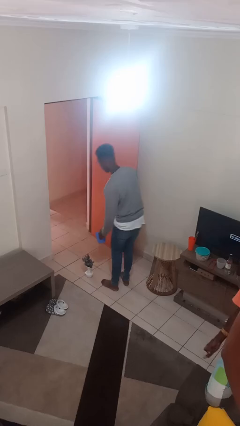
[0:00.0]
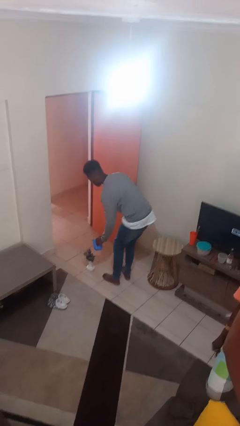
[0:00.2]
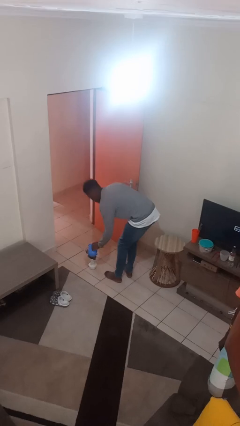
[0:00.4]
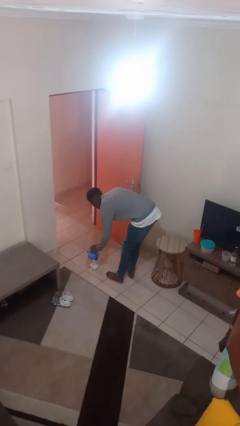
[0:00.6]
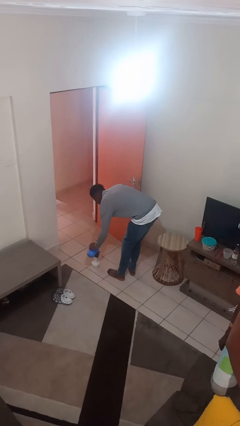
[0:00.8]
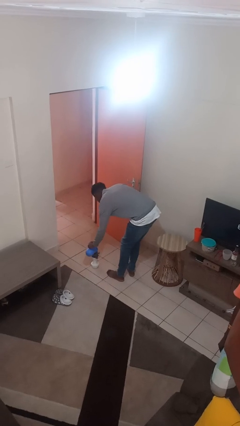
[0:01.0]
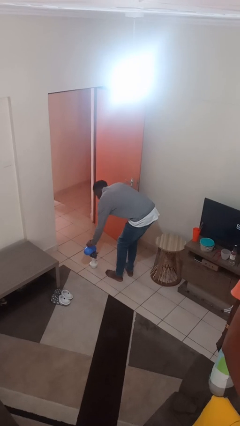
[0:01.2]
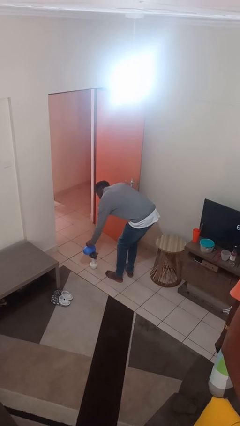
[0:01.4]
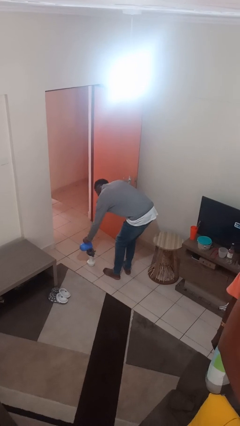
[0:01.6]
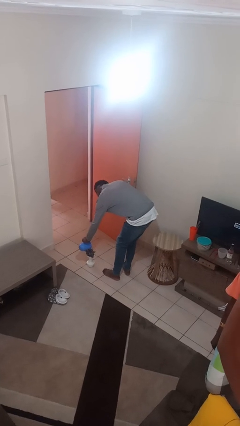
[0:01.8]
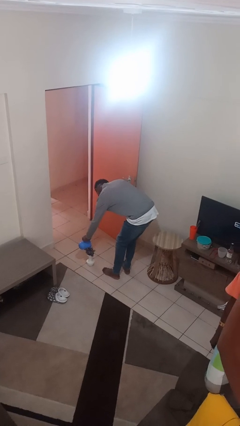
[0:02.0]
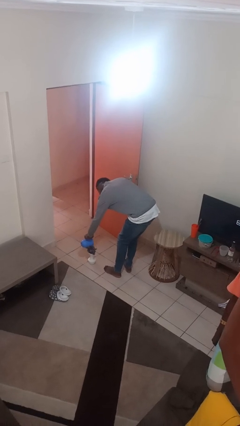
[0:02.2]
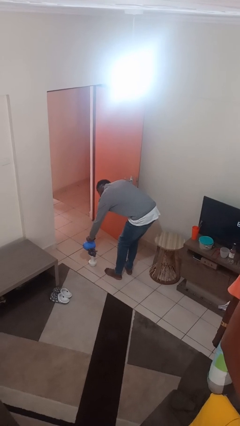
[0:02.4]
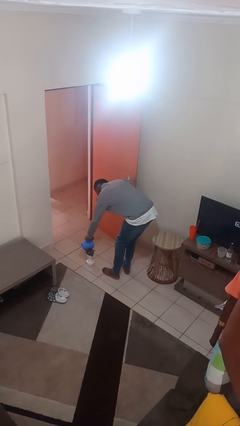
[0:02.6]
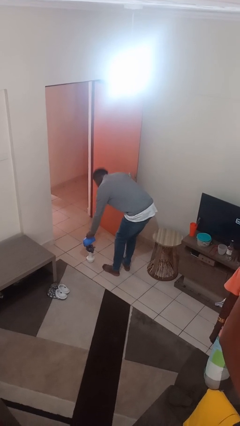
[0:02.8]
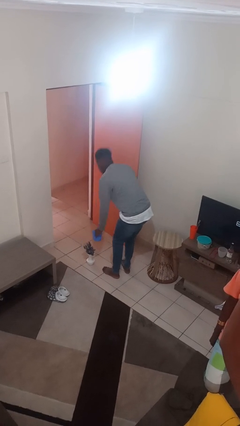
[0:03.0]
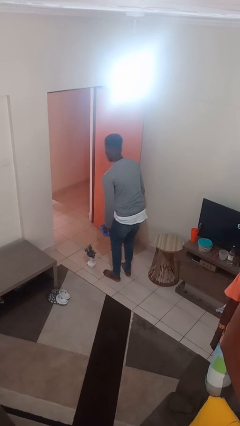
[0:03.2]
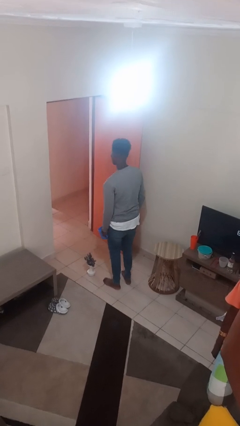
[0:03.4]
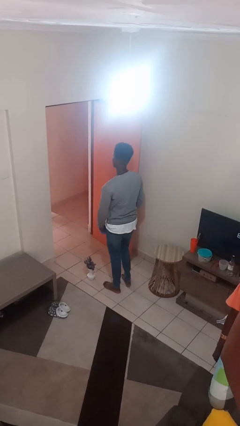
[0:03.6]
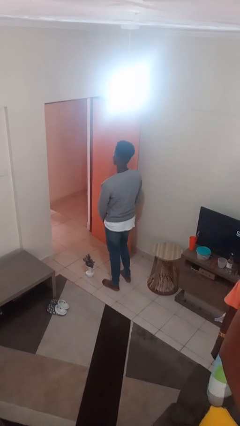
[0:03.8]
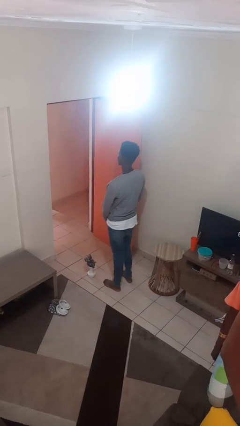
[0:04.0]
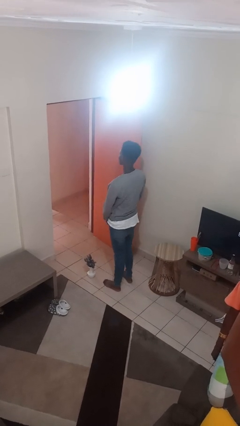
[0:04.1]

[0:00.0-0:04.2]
person waters houseplant

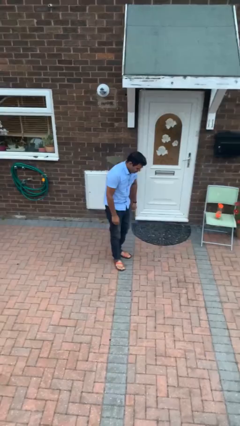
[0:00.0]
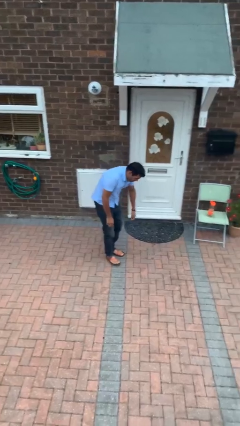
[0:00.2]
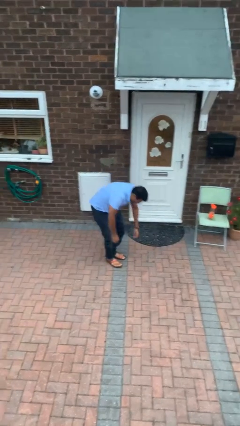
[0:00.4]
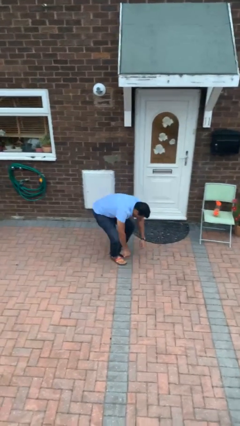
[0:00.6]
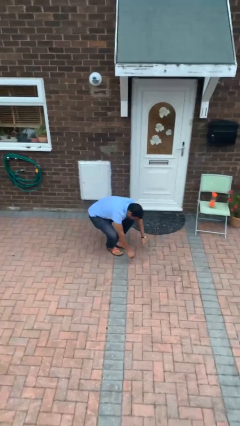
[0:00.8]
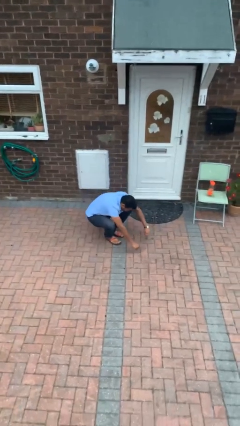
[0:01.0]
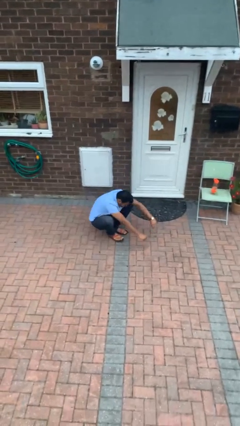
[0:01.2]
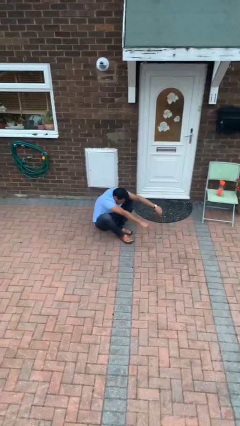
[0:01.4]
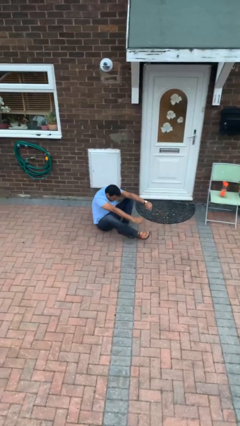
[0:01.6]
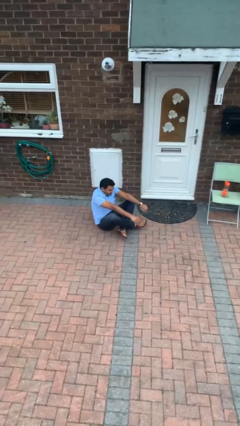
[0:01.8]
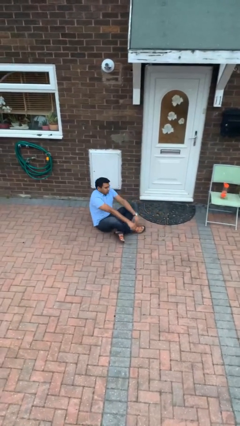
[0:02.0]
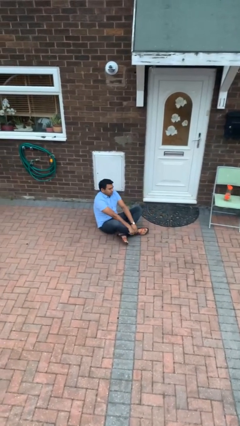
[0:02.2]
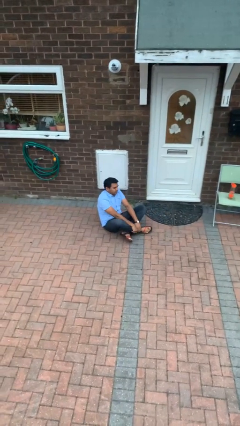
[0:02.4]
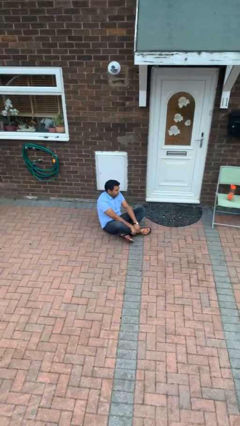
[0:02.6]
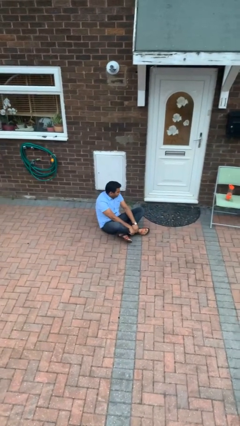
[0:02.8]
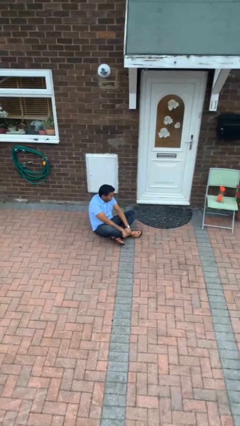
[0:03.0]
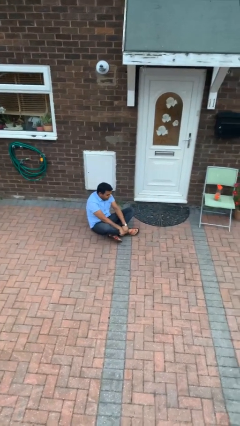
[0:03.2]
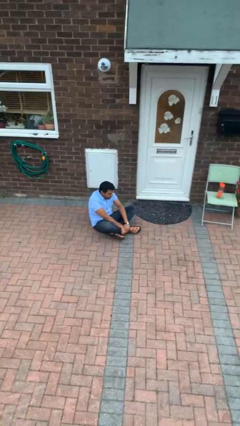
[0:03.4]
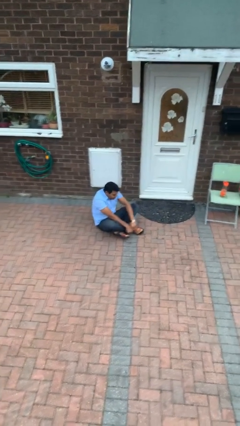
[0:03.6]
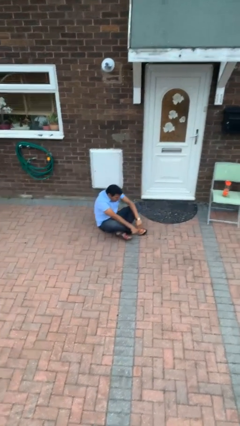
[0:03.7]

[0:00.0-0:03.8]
person sits crisscross

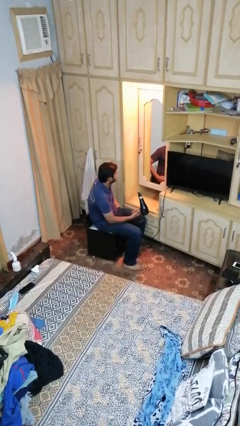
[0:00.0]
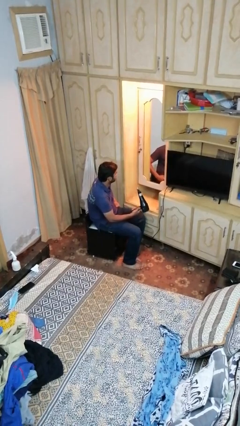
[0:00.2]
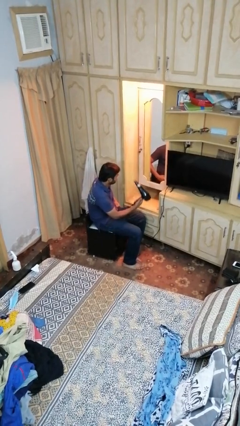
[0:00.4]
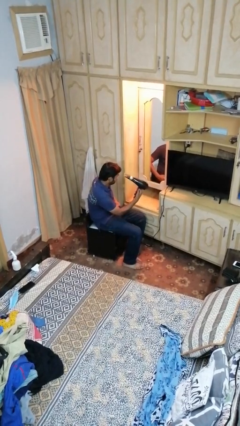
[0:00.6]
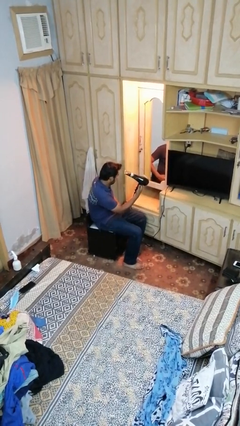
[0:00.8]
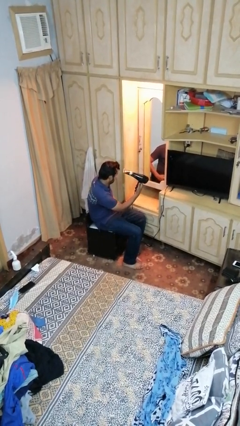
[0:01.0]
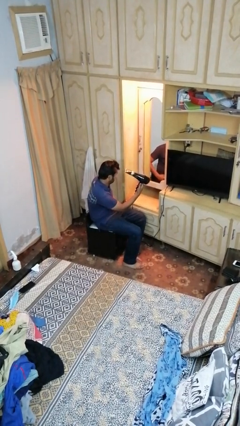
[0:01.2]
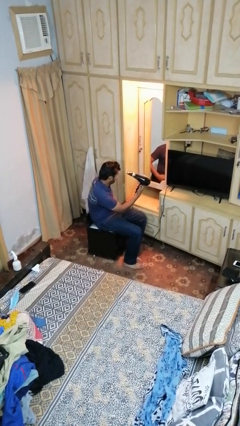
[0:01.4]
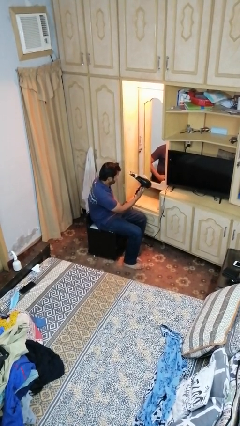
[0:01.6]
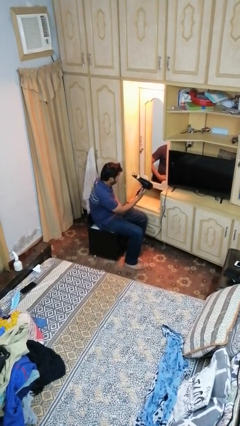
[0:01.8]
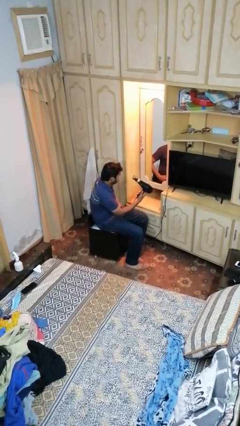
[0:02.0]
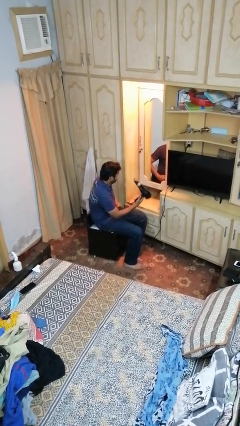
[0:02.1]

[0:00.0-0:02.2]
person dries hair with hairdryer

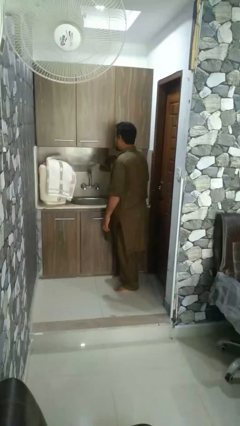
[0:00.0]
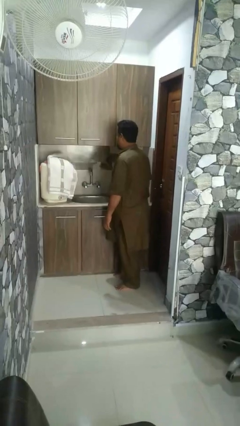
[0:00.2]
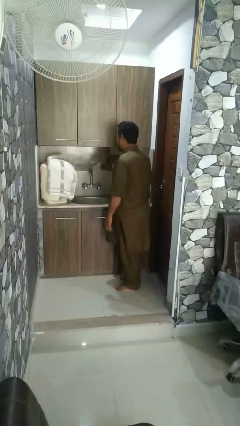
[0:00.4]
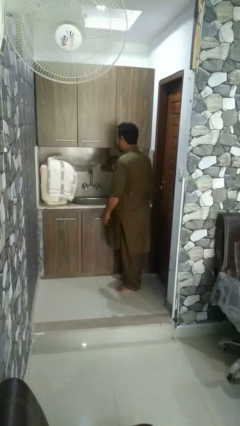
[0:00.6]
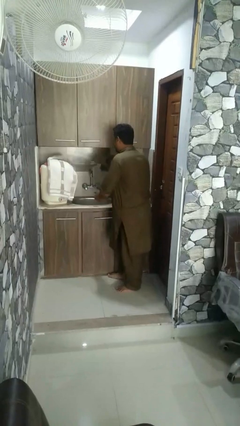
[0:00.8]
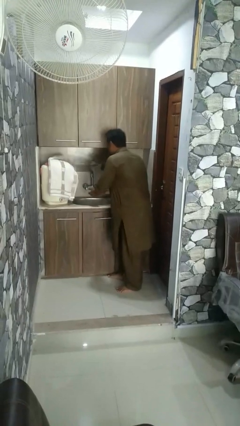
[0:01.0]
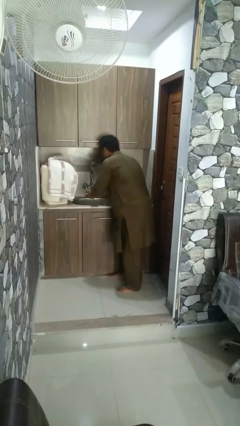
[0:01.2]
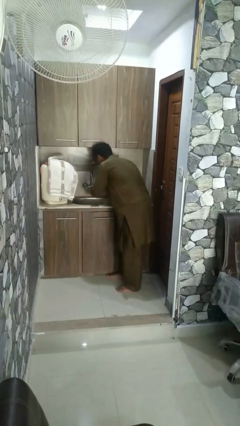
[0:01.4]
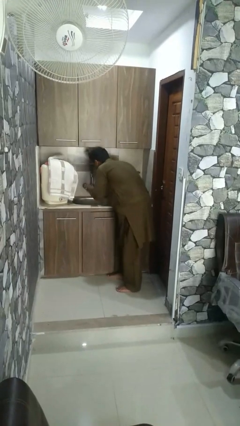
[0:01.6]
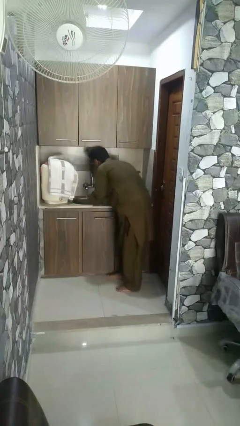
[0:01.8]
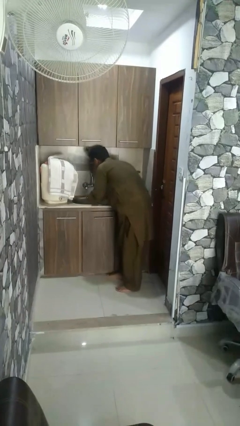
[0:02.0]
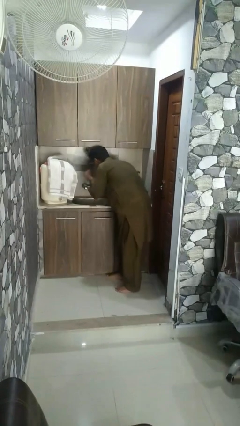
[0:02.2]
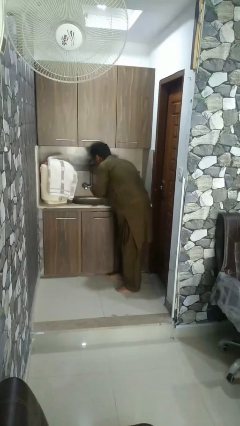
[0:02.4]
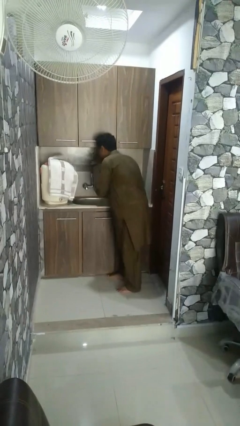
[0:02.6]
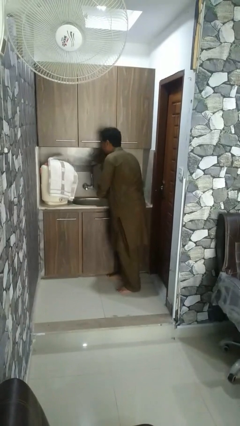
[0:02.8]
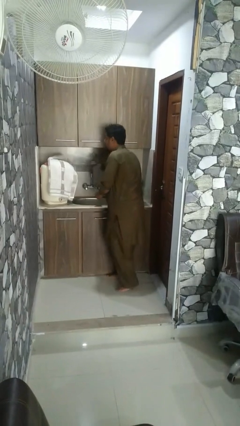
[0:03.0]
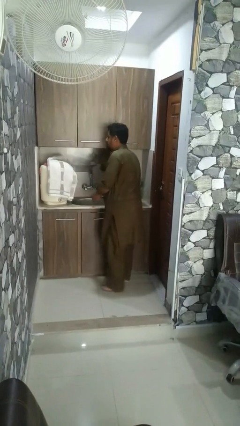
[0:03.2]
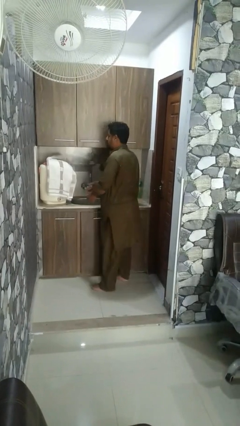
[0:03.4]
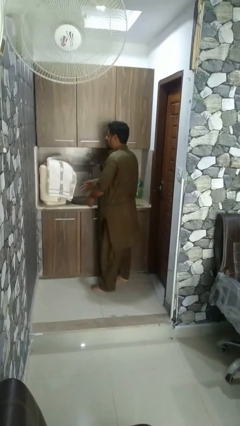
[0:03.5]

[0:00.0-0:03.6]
person washes face

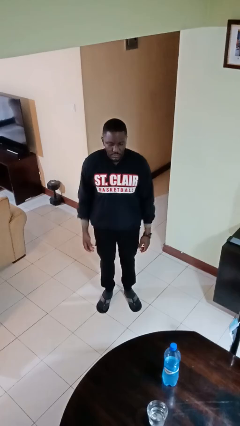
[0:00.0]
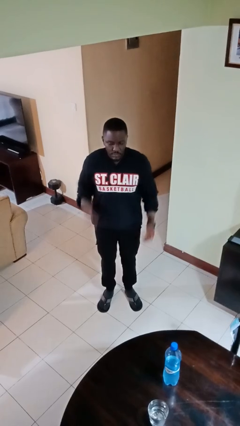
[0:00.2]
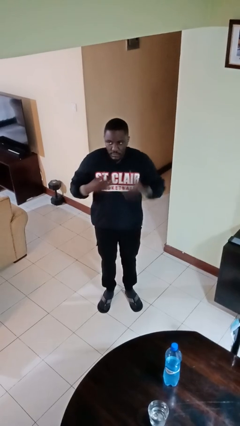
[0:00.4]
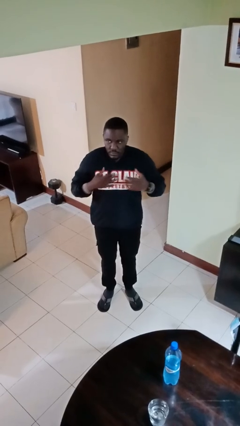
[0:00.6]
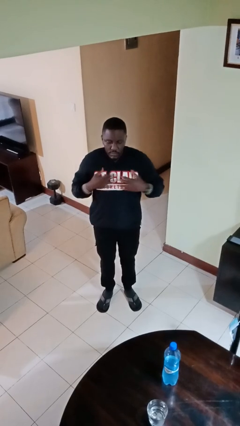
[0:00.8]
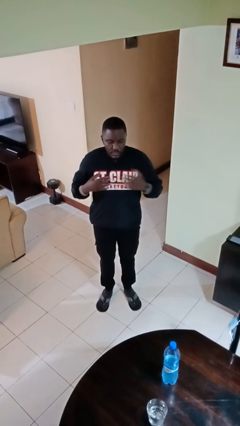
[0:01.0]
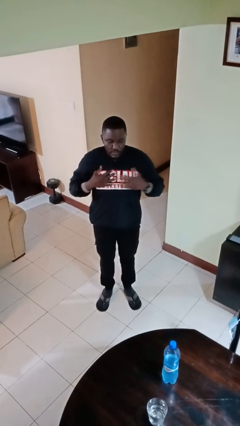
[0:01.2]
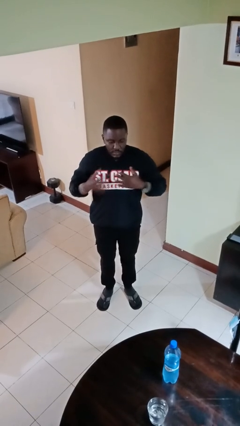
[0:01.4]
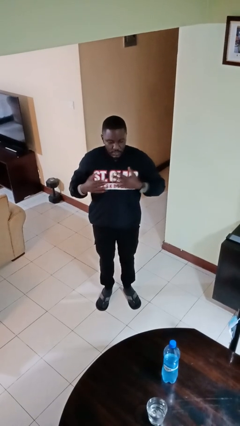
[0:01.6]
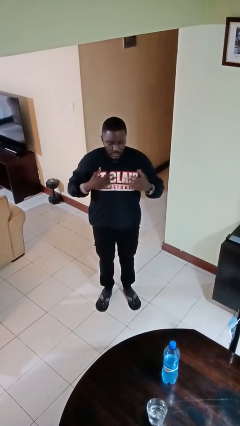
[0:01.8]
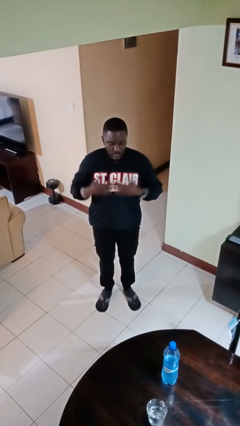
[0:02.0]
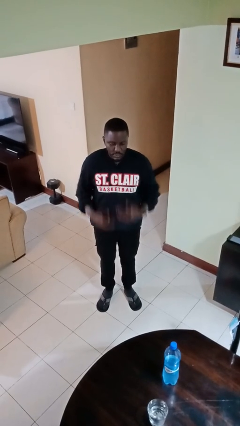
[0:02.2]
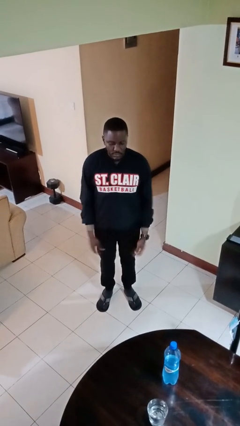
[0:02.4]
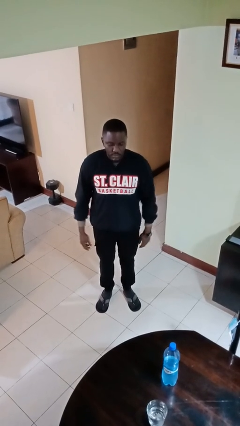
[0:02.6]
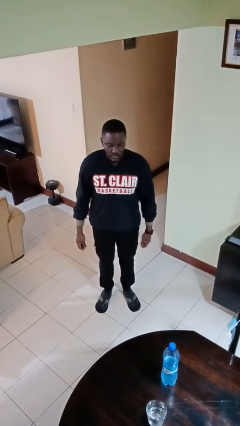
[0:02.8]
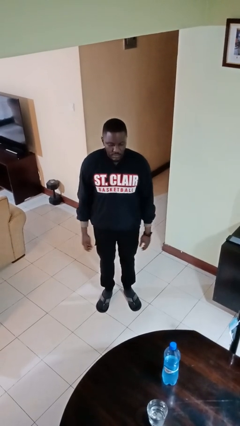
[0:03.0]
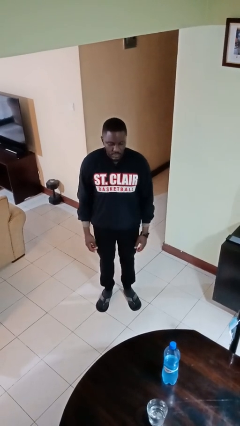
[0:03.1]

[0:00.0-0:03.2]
person drums on chest

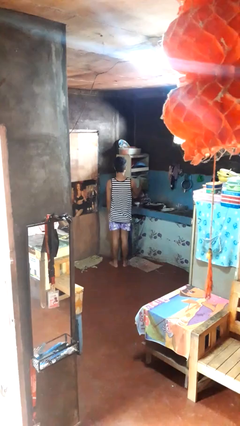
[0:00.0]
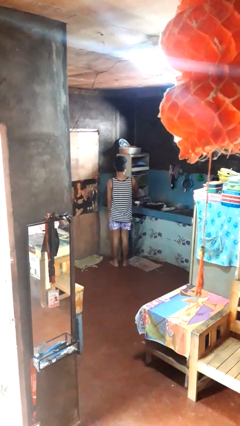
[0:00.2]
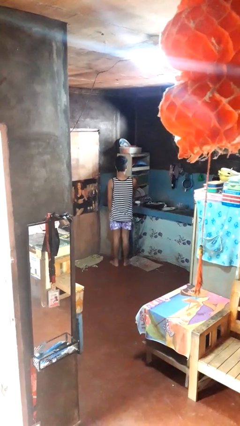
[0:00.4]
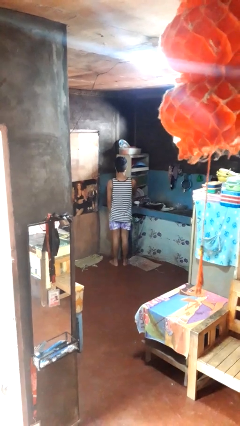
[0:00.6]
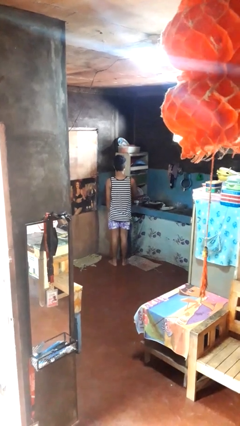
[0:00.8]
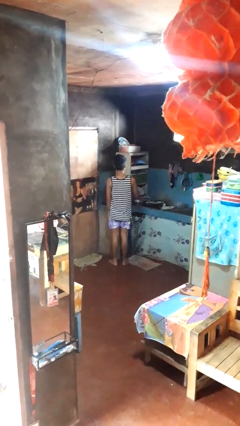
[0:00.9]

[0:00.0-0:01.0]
person closes kitchen drawer
